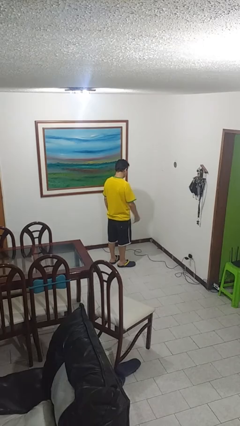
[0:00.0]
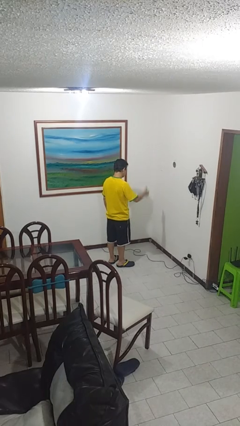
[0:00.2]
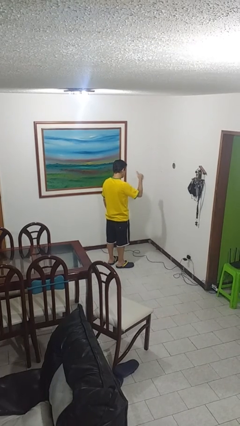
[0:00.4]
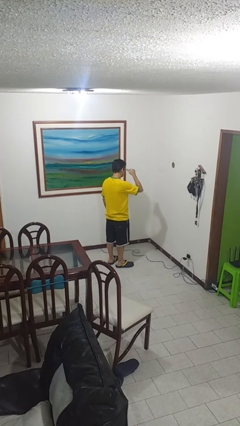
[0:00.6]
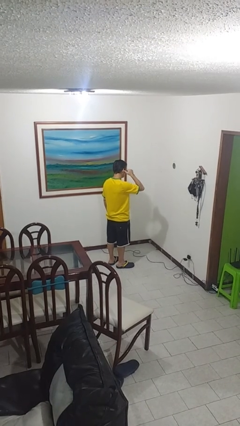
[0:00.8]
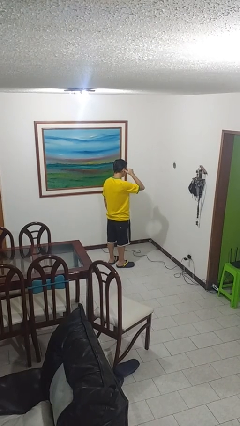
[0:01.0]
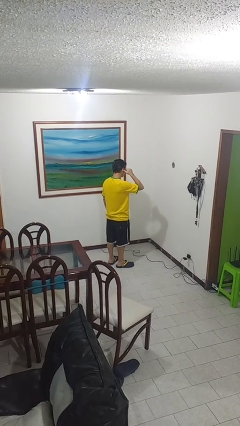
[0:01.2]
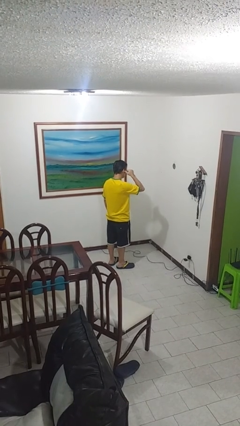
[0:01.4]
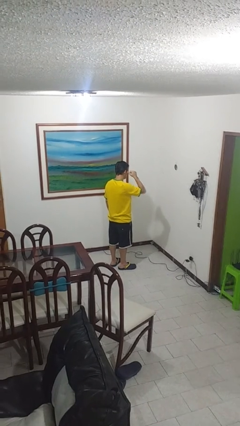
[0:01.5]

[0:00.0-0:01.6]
person gestures call me

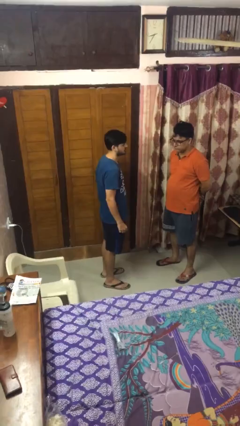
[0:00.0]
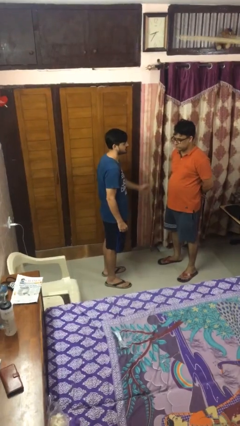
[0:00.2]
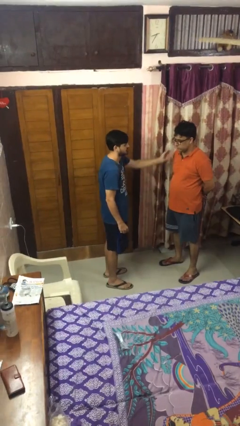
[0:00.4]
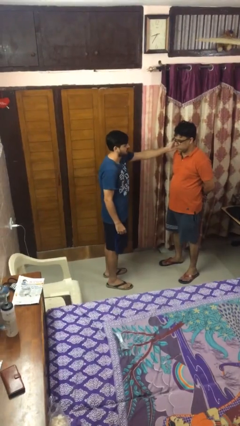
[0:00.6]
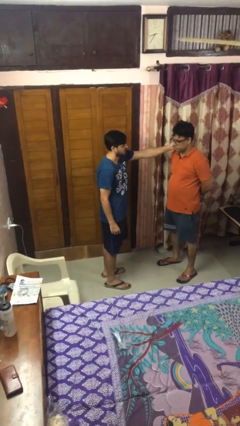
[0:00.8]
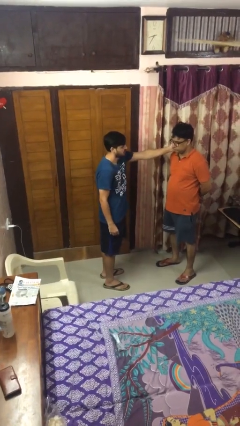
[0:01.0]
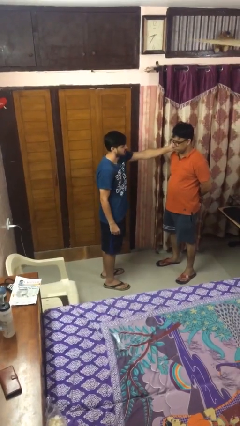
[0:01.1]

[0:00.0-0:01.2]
person touches face of person

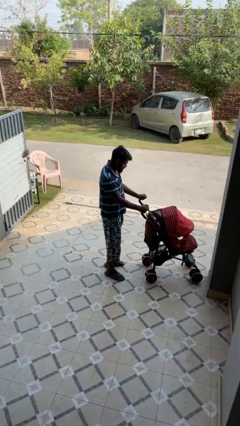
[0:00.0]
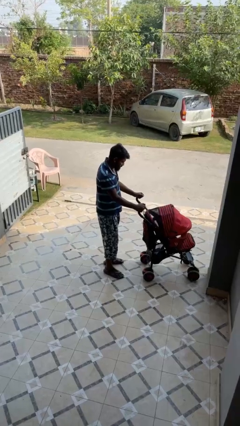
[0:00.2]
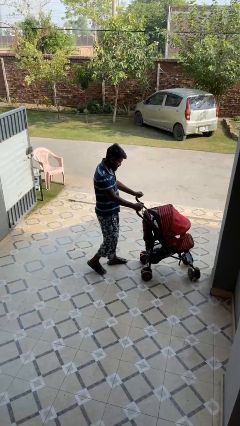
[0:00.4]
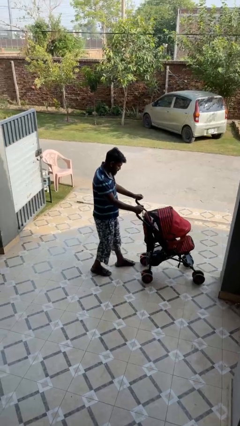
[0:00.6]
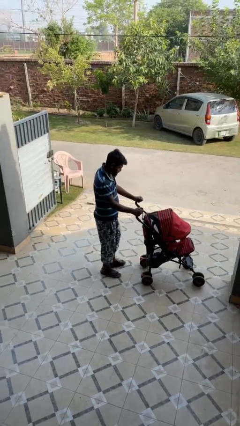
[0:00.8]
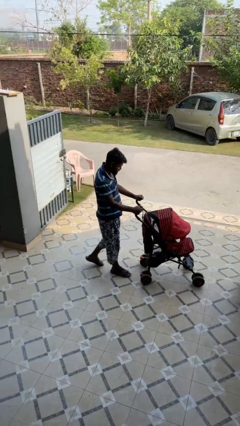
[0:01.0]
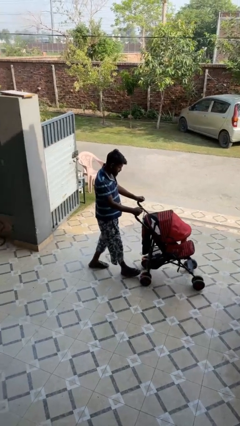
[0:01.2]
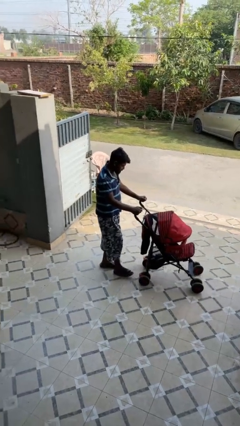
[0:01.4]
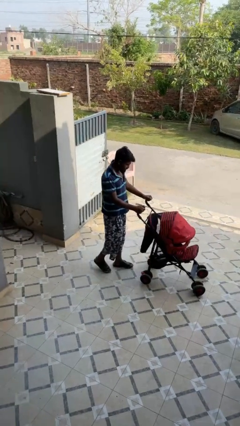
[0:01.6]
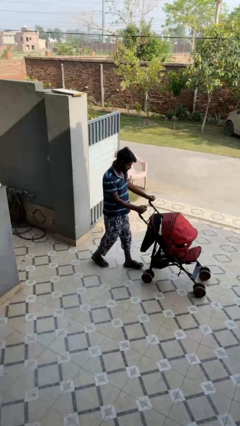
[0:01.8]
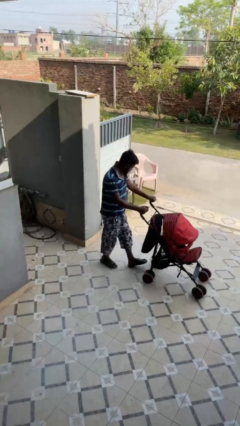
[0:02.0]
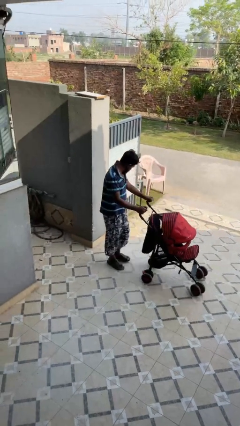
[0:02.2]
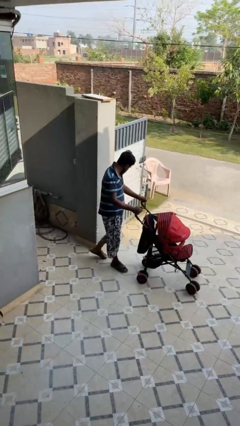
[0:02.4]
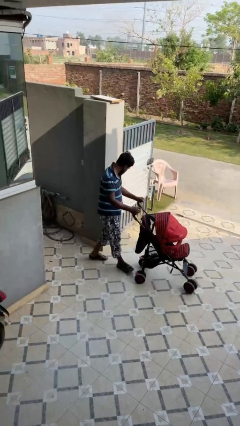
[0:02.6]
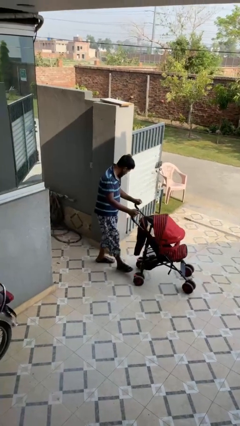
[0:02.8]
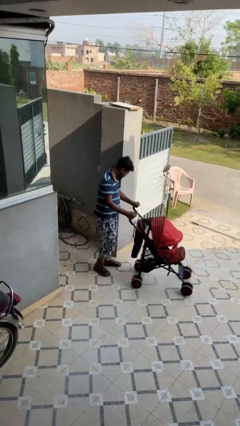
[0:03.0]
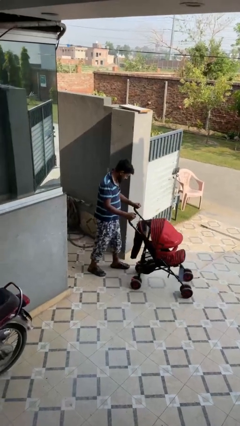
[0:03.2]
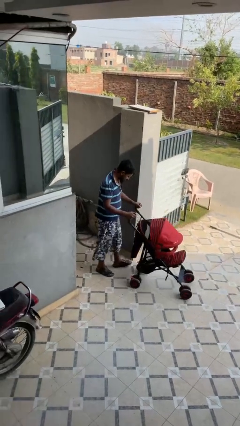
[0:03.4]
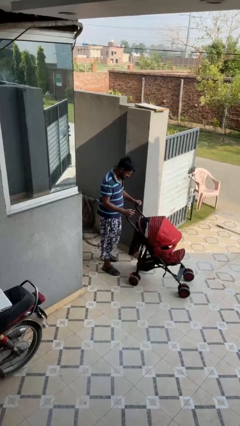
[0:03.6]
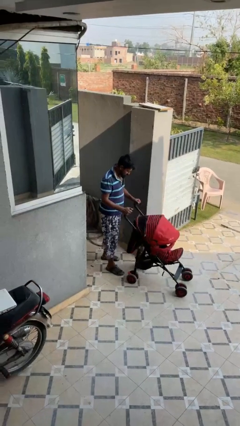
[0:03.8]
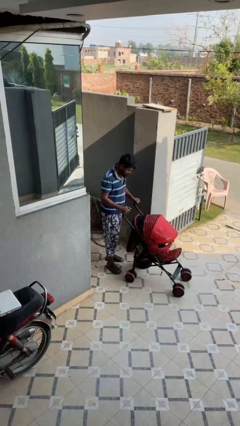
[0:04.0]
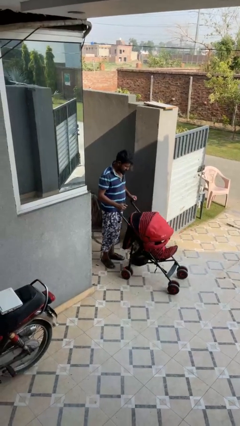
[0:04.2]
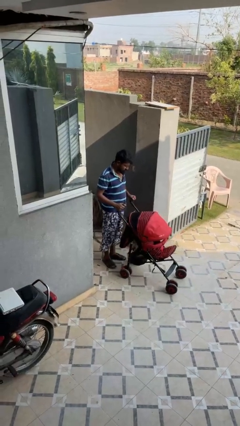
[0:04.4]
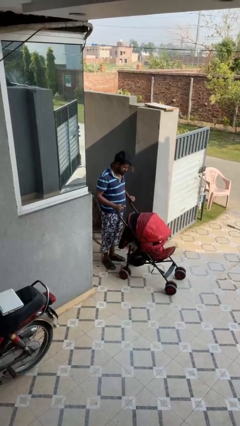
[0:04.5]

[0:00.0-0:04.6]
person pulls wheeled cart

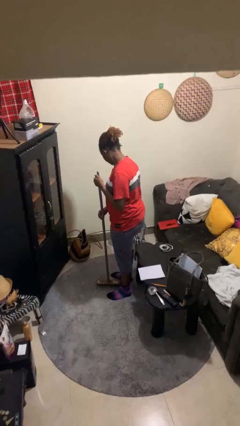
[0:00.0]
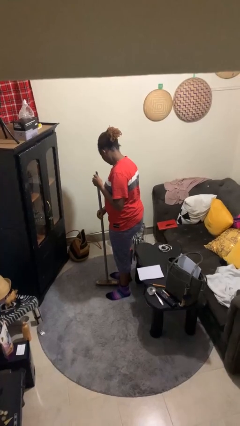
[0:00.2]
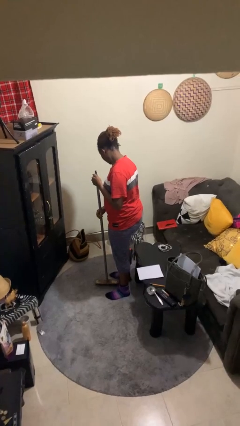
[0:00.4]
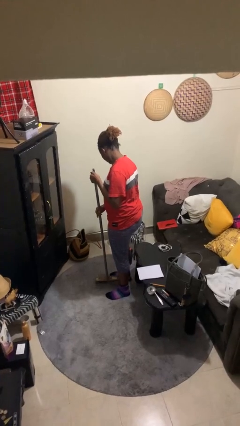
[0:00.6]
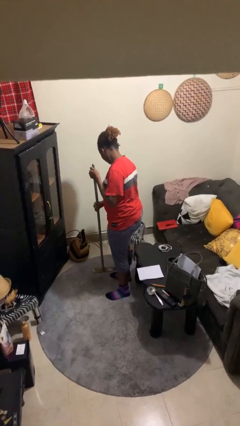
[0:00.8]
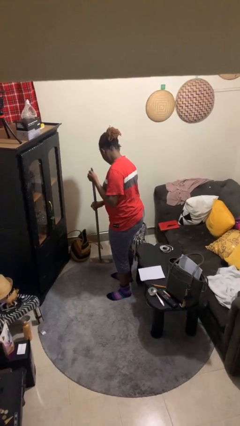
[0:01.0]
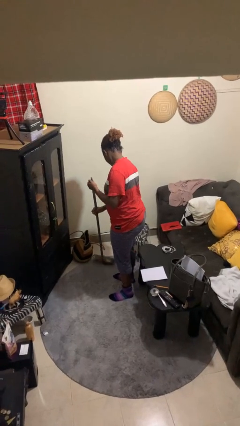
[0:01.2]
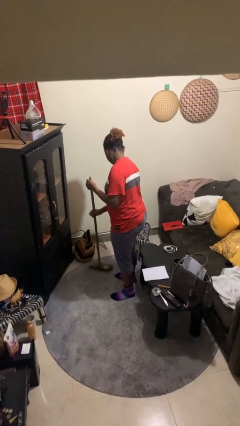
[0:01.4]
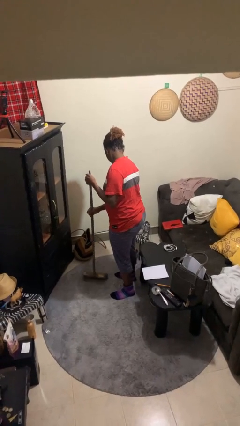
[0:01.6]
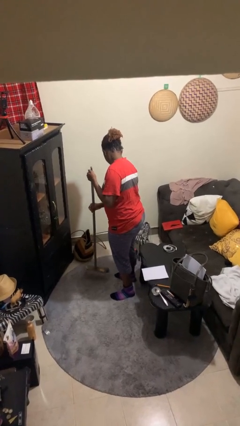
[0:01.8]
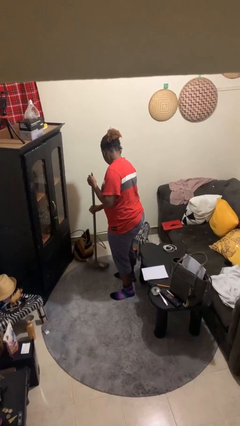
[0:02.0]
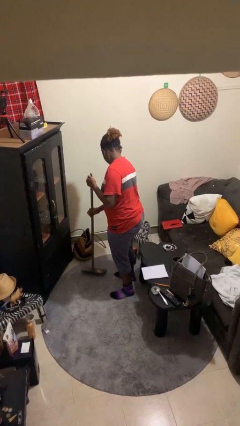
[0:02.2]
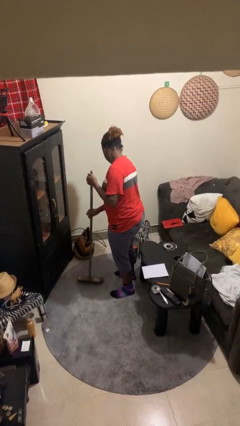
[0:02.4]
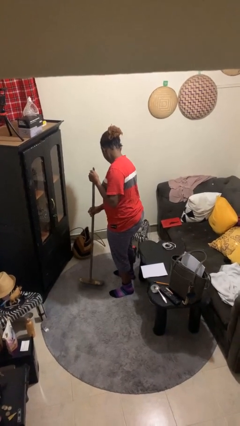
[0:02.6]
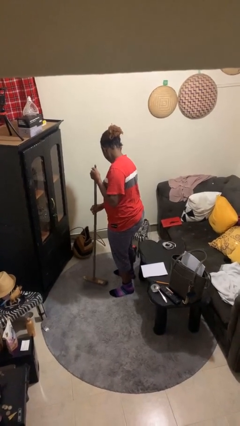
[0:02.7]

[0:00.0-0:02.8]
person sweeps floor

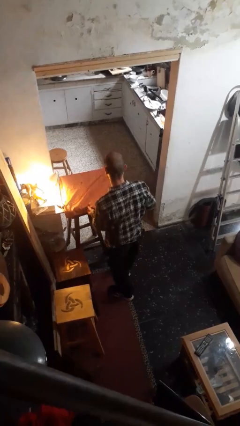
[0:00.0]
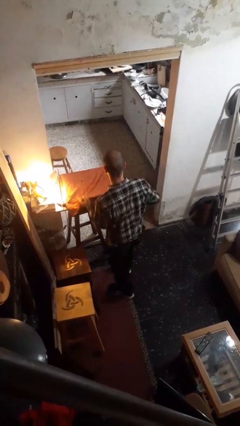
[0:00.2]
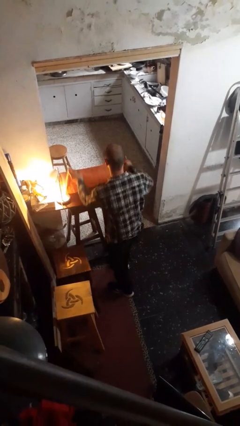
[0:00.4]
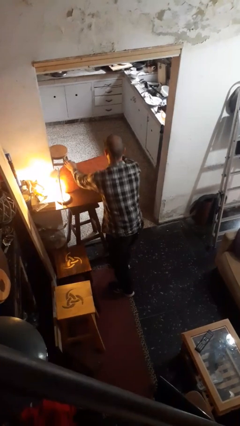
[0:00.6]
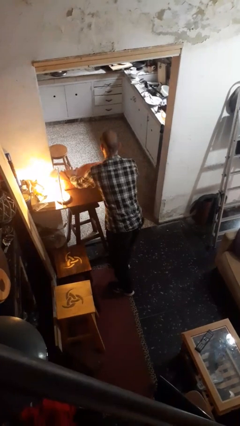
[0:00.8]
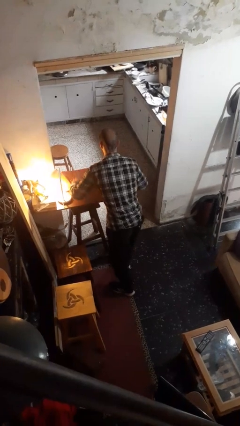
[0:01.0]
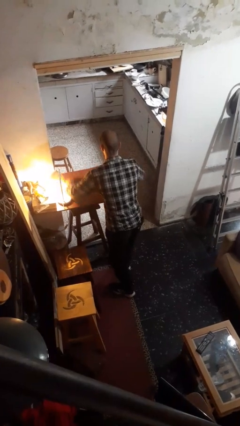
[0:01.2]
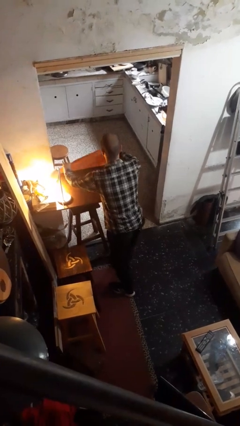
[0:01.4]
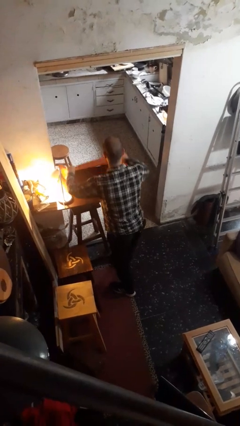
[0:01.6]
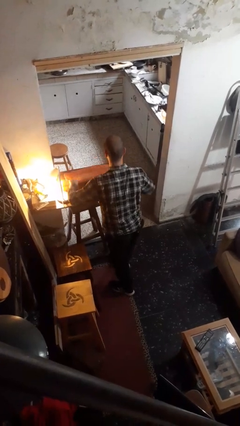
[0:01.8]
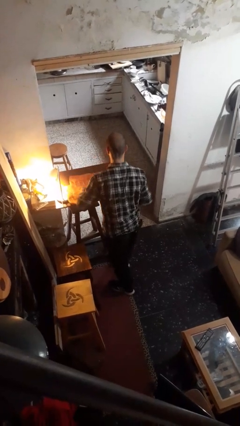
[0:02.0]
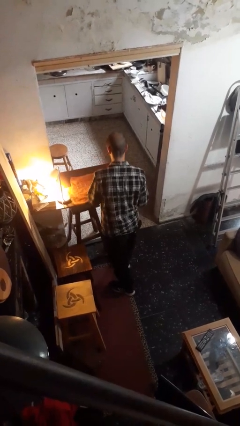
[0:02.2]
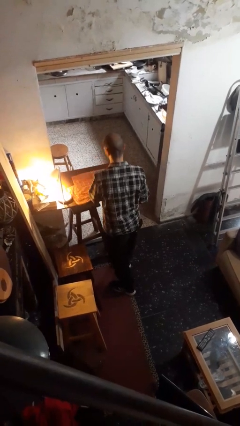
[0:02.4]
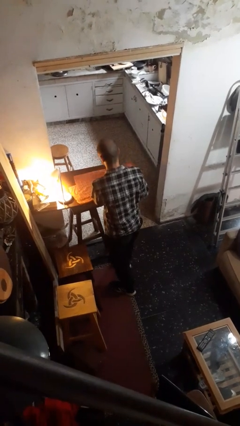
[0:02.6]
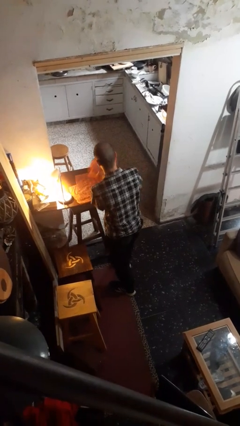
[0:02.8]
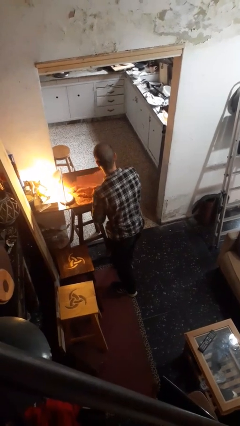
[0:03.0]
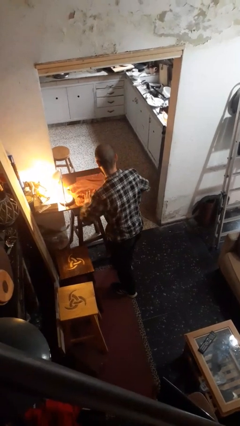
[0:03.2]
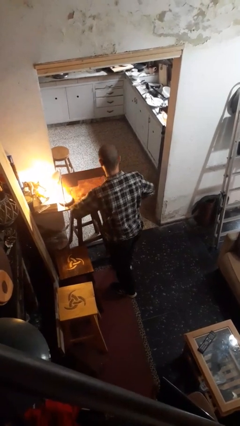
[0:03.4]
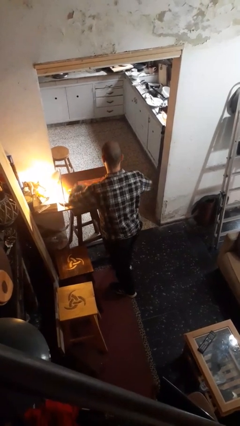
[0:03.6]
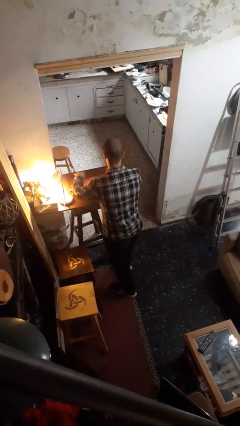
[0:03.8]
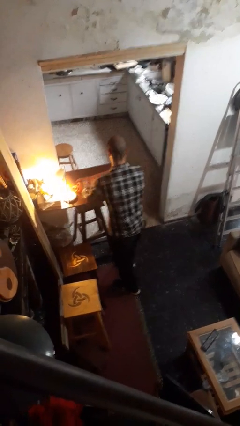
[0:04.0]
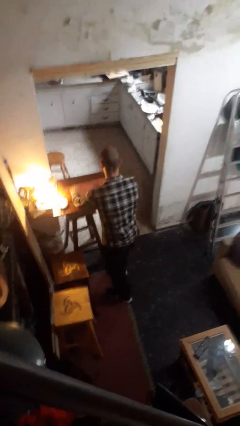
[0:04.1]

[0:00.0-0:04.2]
person folds tablecloth

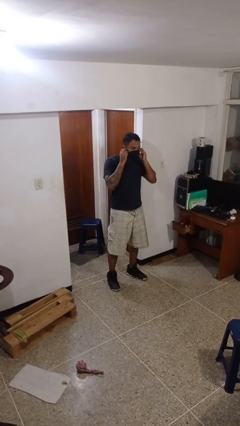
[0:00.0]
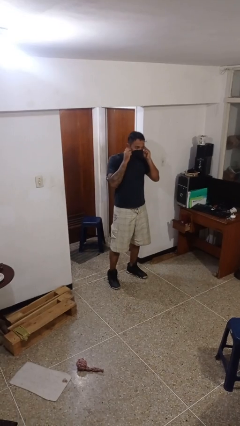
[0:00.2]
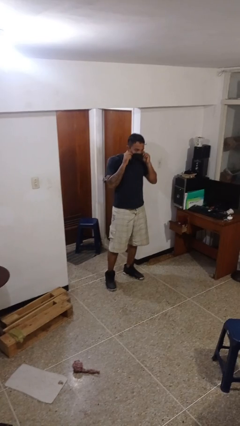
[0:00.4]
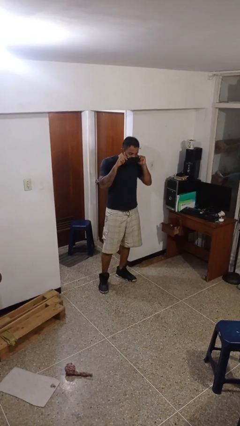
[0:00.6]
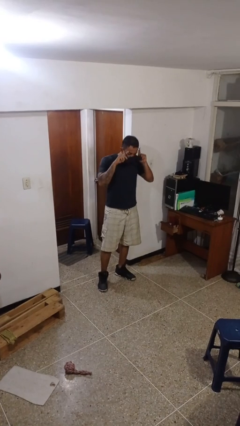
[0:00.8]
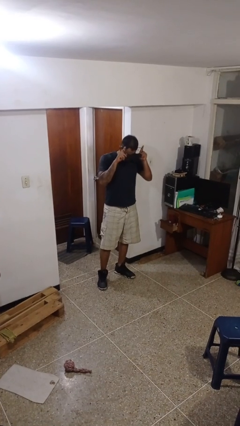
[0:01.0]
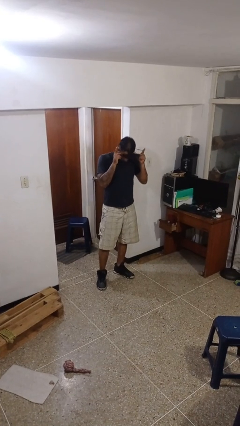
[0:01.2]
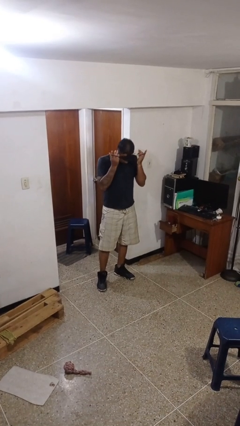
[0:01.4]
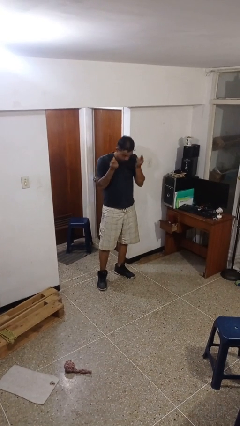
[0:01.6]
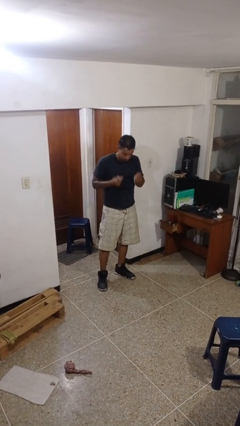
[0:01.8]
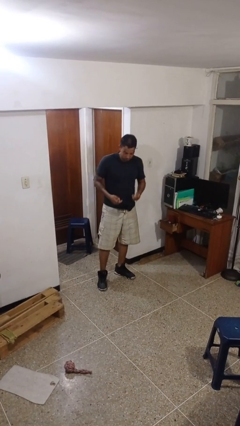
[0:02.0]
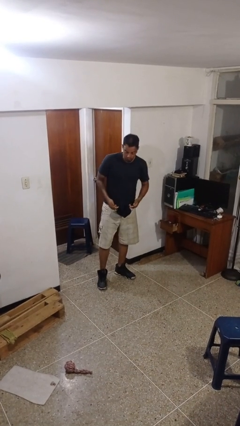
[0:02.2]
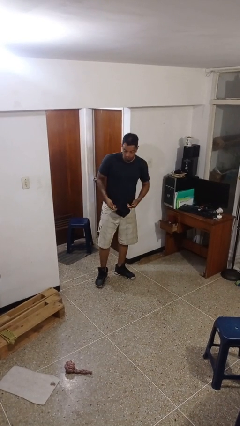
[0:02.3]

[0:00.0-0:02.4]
person takes off facemask

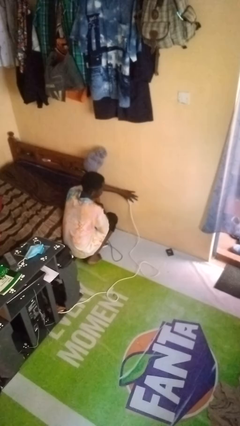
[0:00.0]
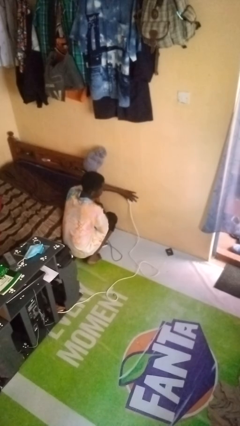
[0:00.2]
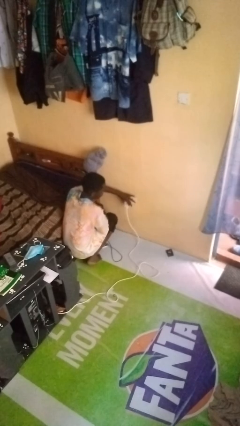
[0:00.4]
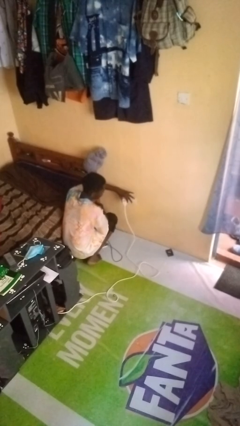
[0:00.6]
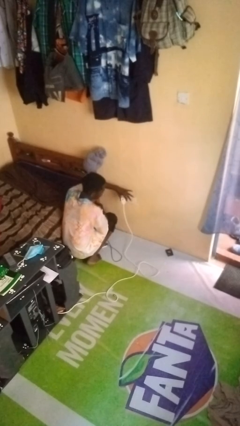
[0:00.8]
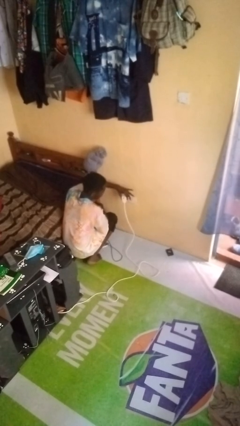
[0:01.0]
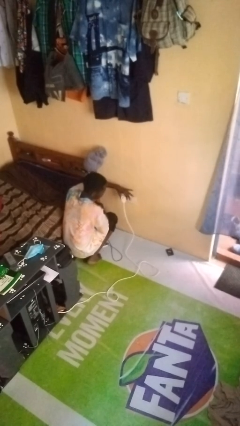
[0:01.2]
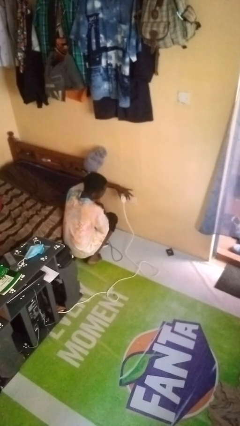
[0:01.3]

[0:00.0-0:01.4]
person unplugs from electrical socket
